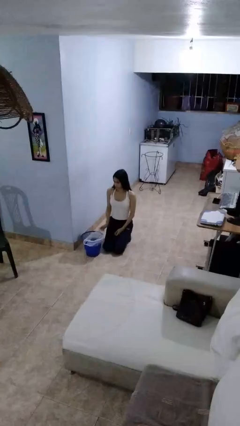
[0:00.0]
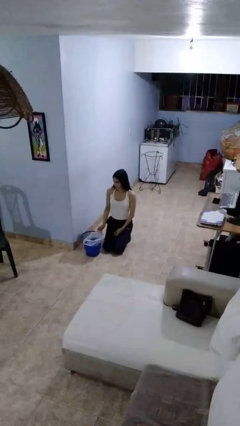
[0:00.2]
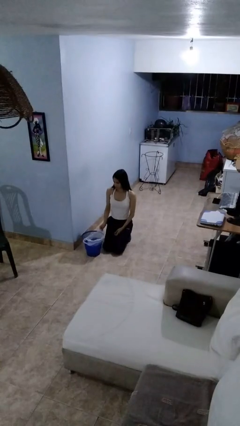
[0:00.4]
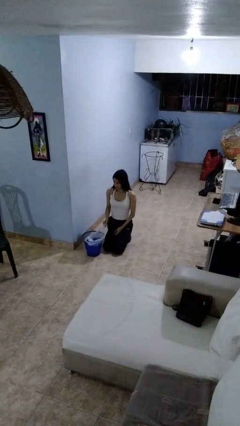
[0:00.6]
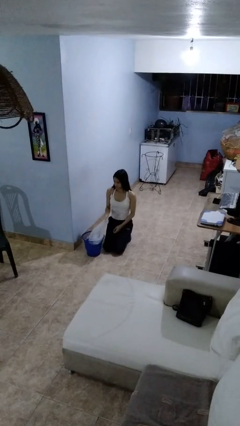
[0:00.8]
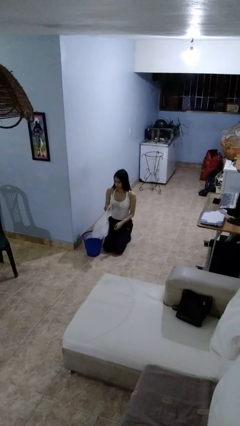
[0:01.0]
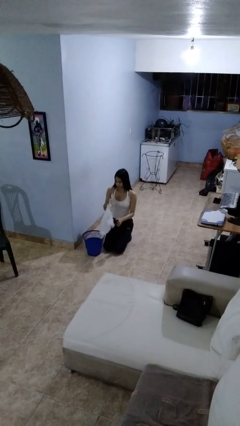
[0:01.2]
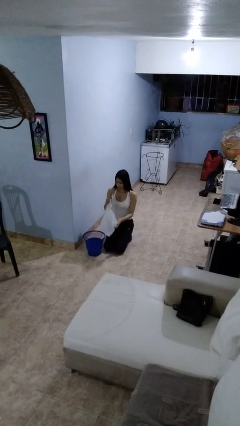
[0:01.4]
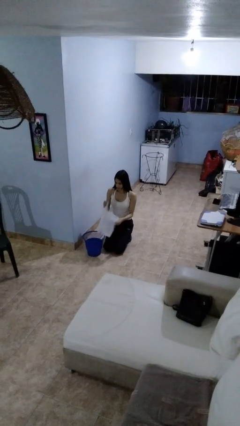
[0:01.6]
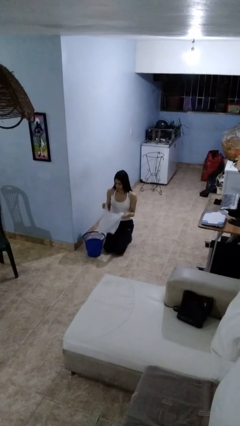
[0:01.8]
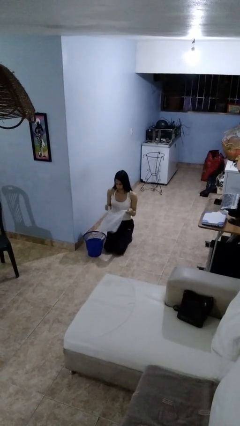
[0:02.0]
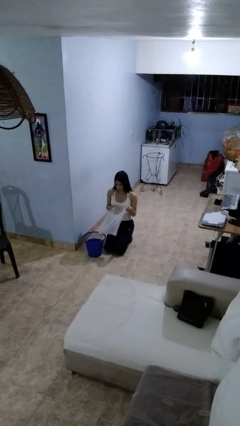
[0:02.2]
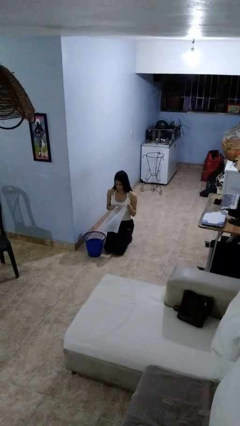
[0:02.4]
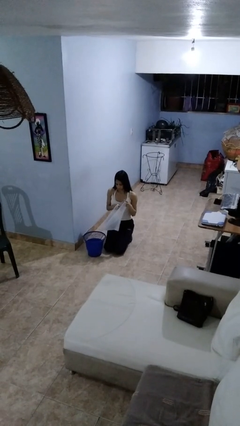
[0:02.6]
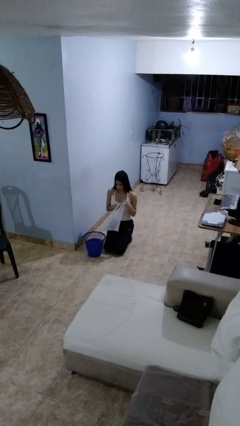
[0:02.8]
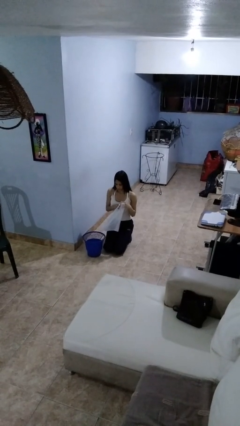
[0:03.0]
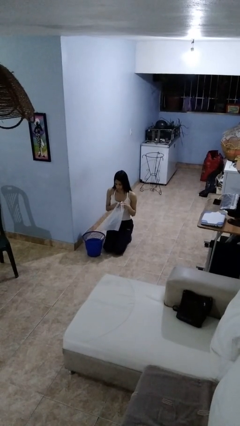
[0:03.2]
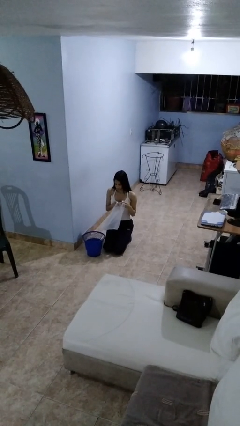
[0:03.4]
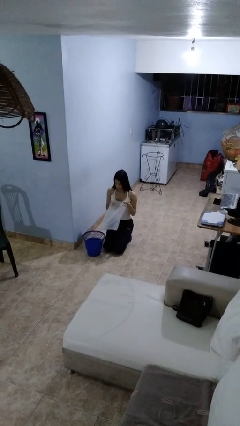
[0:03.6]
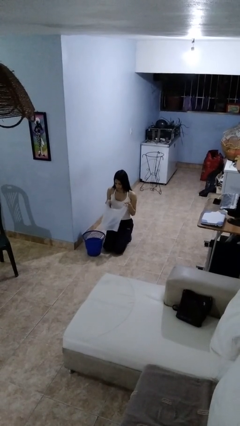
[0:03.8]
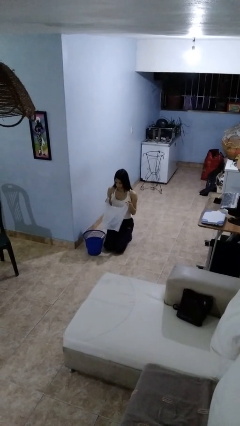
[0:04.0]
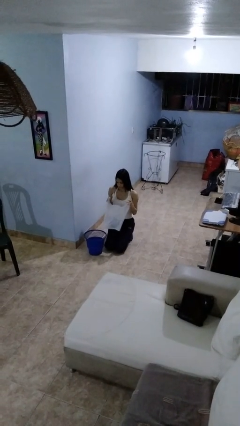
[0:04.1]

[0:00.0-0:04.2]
person removes trashbag from trashcan

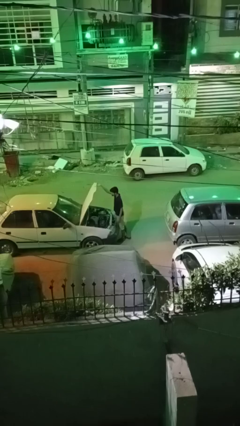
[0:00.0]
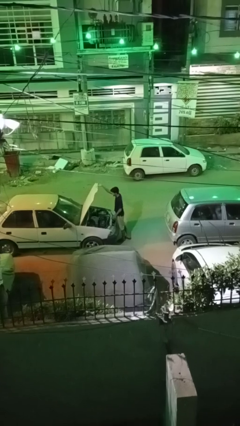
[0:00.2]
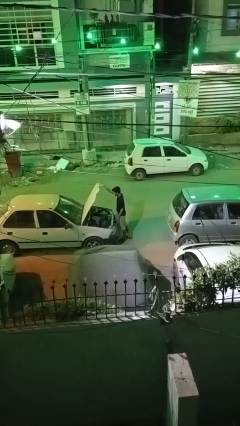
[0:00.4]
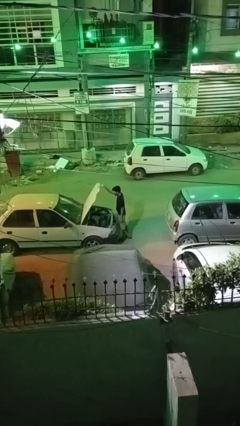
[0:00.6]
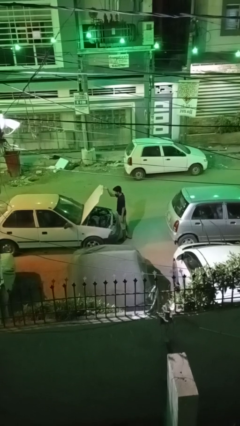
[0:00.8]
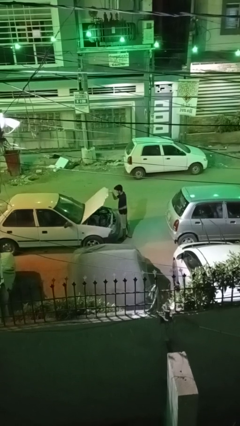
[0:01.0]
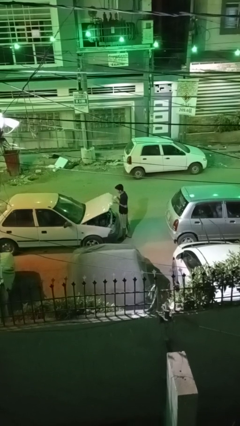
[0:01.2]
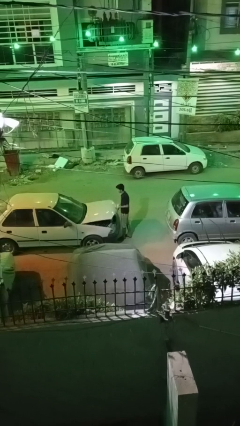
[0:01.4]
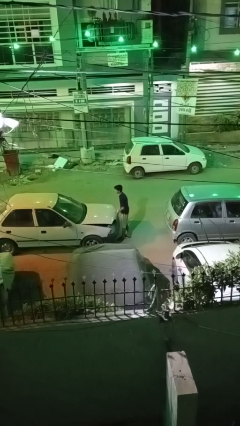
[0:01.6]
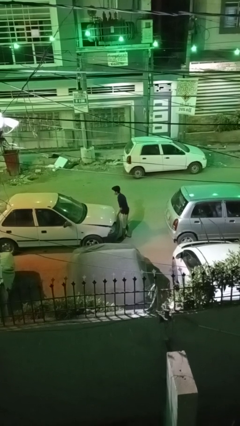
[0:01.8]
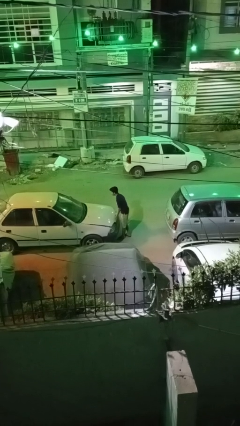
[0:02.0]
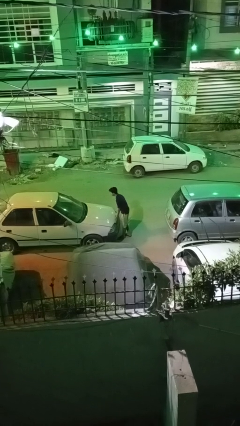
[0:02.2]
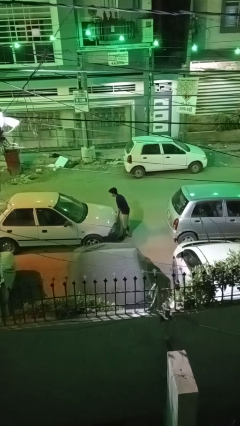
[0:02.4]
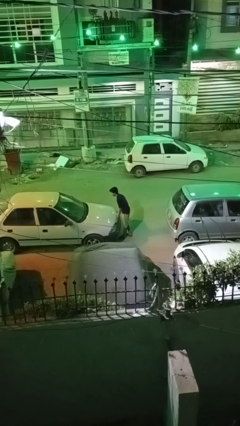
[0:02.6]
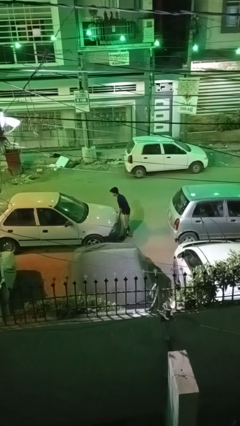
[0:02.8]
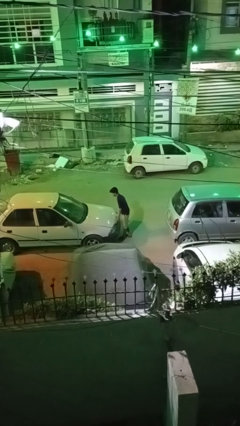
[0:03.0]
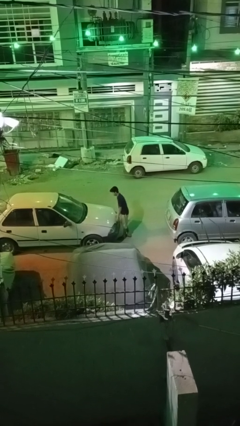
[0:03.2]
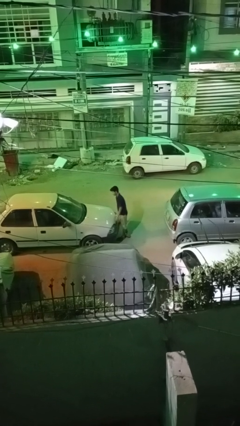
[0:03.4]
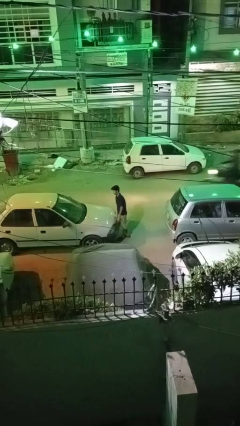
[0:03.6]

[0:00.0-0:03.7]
person closes car hood

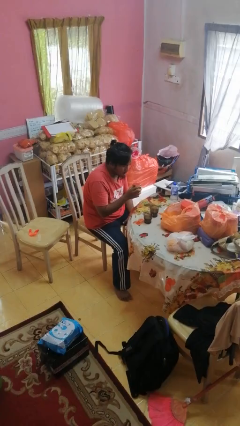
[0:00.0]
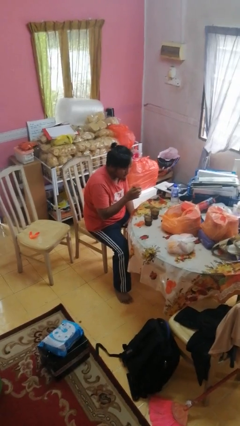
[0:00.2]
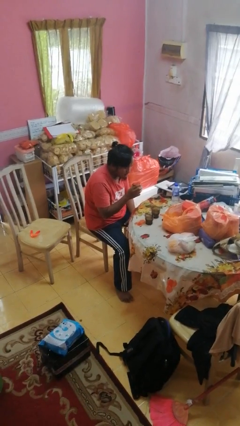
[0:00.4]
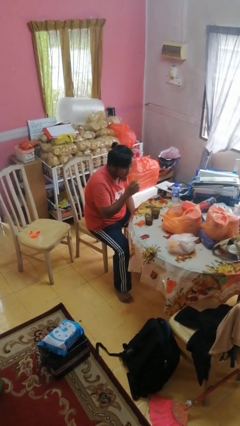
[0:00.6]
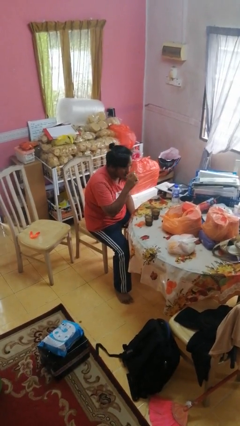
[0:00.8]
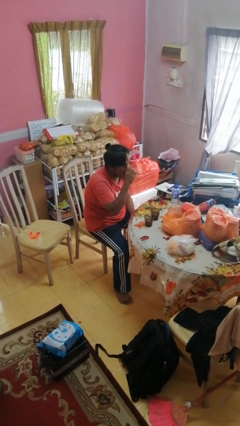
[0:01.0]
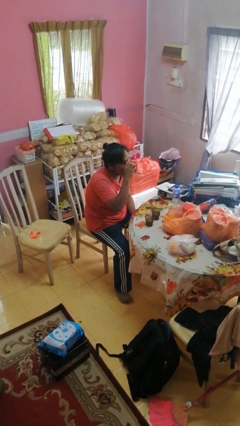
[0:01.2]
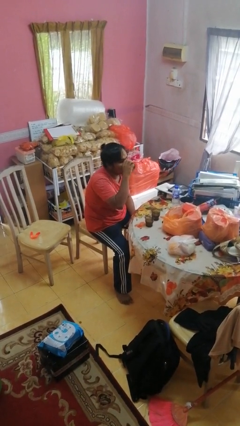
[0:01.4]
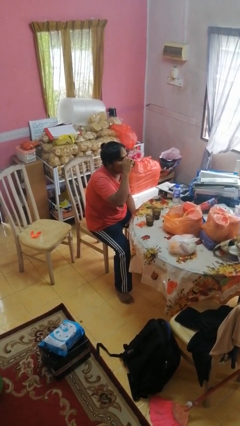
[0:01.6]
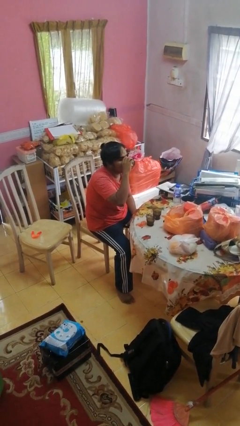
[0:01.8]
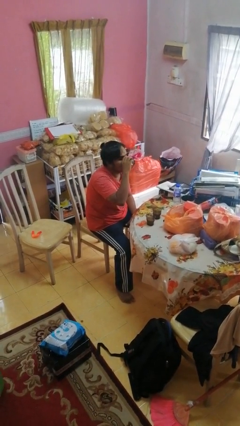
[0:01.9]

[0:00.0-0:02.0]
person drinks from shotglass

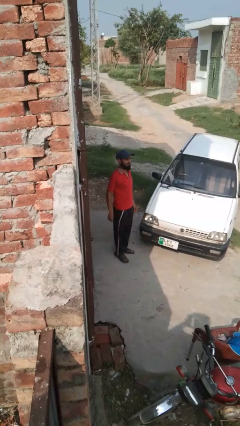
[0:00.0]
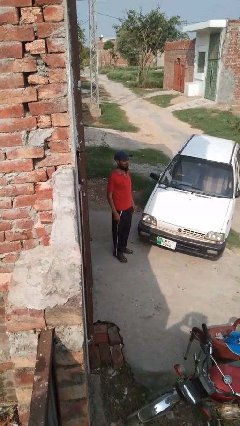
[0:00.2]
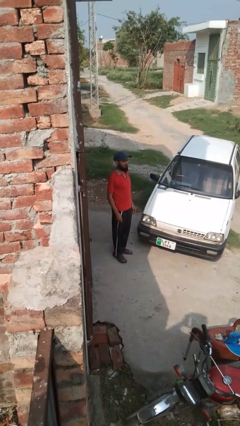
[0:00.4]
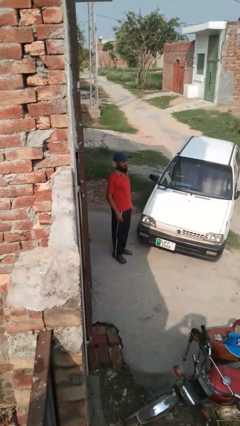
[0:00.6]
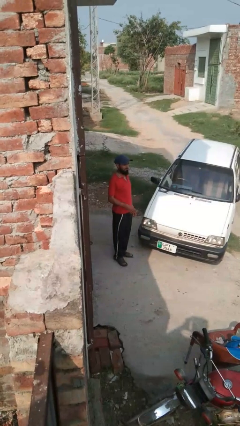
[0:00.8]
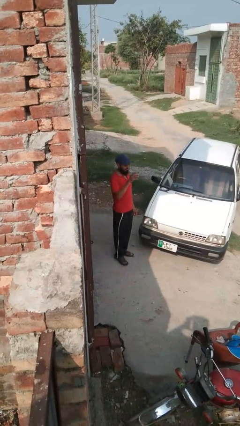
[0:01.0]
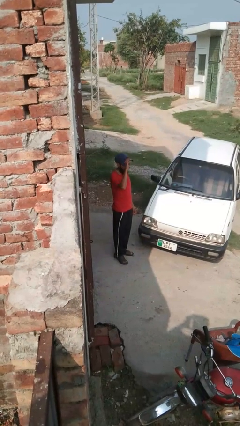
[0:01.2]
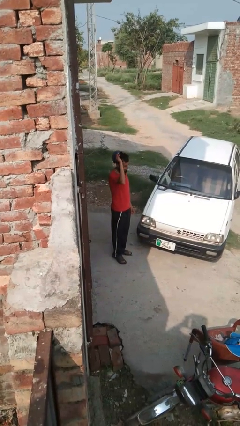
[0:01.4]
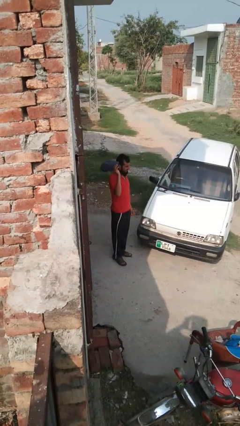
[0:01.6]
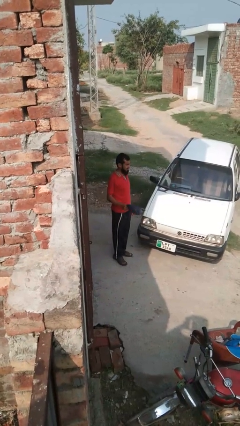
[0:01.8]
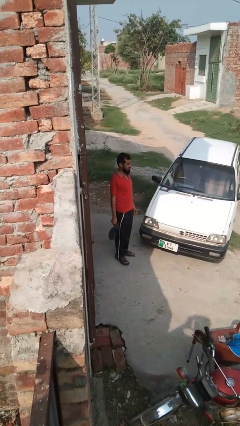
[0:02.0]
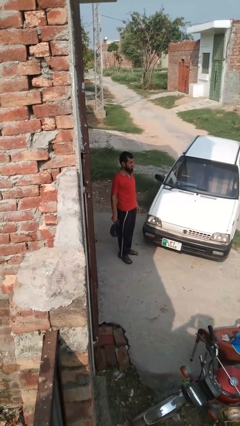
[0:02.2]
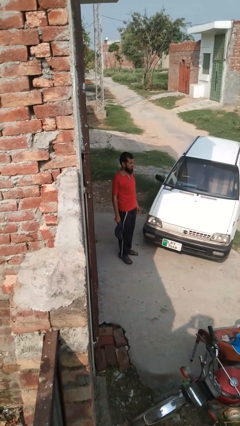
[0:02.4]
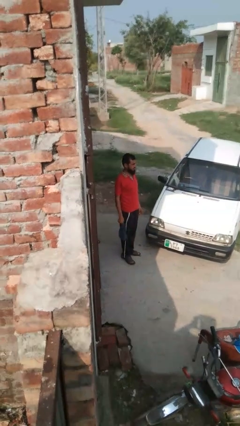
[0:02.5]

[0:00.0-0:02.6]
person takes off hat

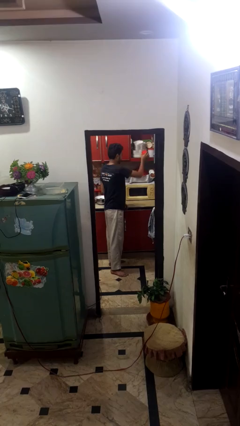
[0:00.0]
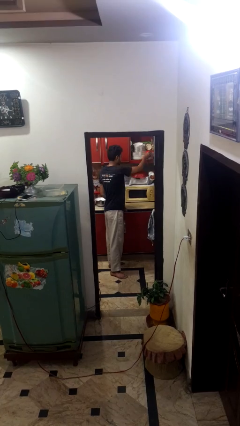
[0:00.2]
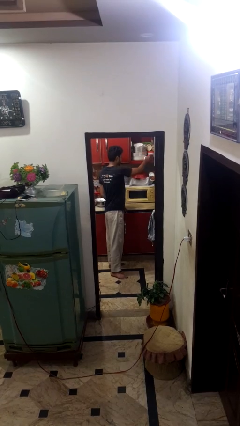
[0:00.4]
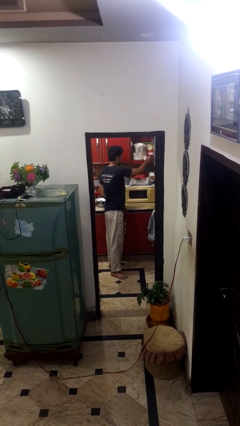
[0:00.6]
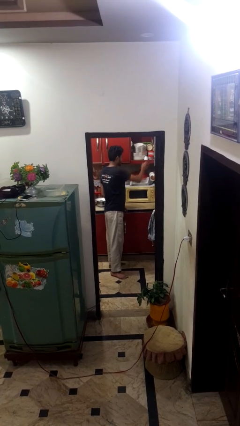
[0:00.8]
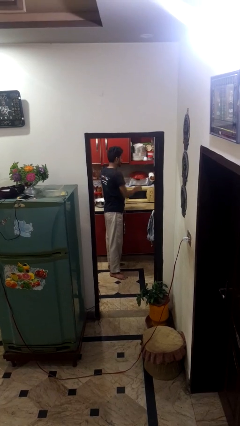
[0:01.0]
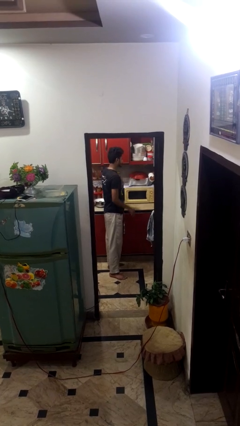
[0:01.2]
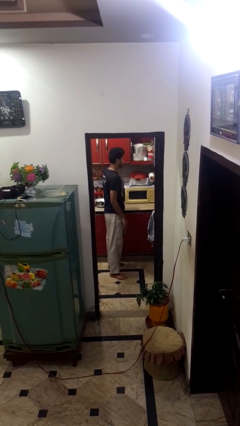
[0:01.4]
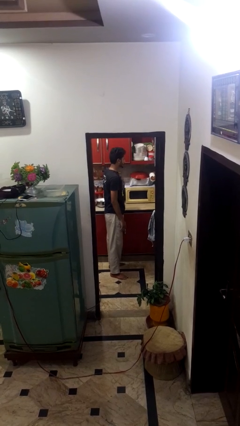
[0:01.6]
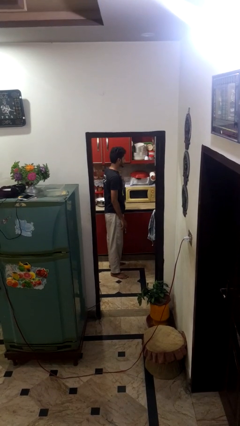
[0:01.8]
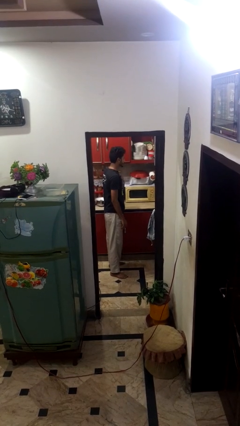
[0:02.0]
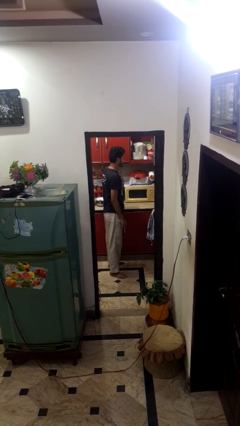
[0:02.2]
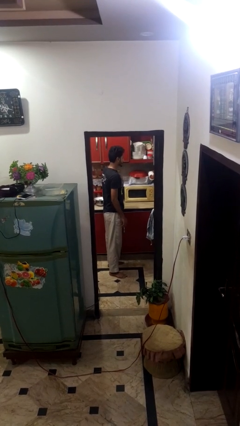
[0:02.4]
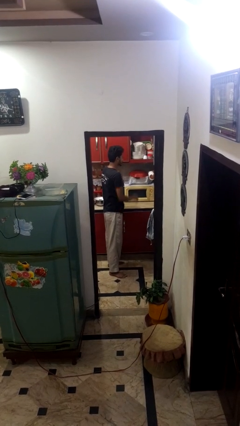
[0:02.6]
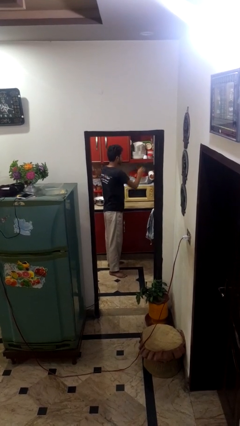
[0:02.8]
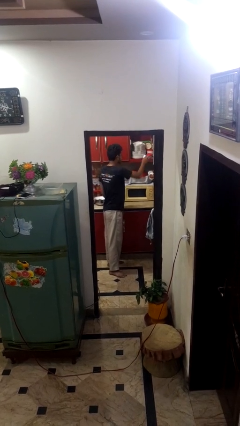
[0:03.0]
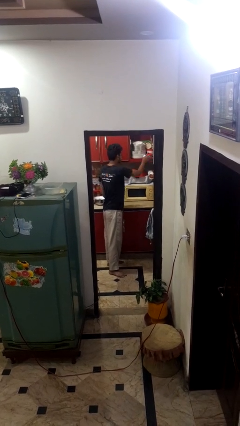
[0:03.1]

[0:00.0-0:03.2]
person puts down object into cabinet

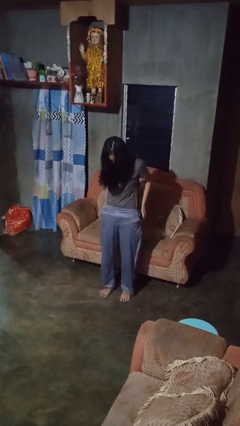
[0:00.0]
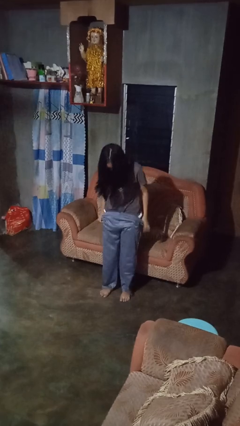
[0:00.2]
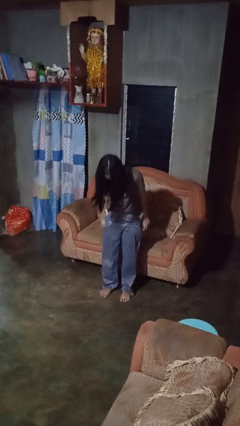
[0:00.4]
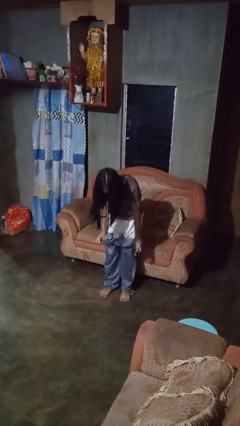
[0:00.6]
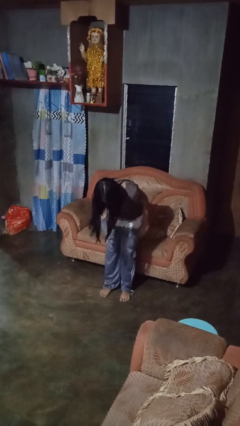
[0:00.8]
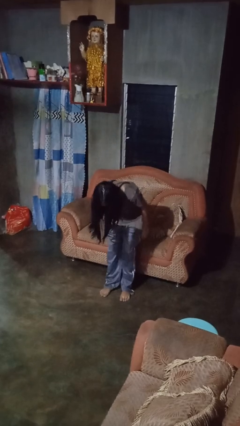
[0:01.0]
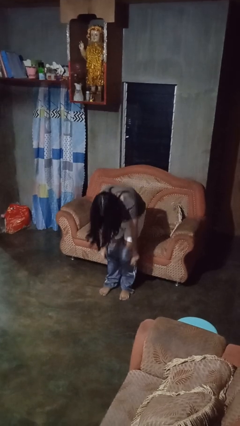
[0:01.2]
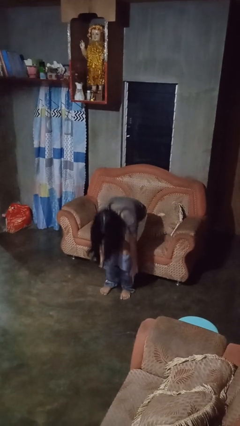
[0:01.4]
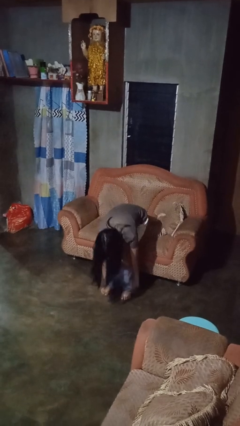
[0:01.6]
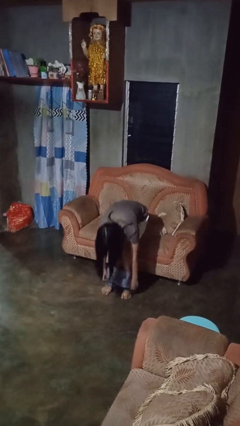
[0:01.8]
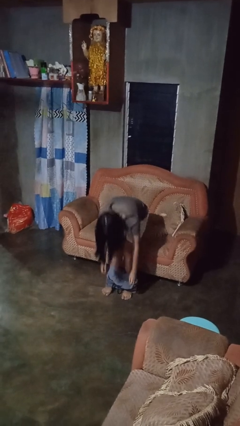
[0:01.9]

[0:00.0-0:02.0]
person takes off pants
